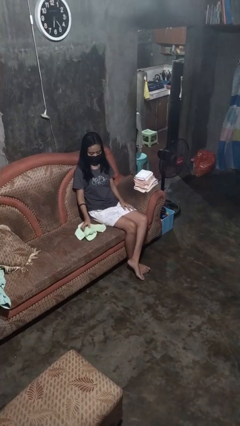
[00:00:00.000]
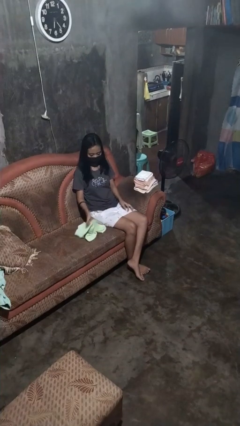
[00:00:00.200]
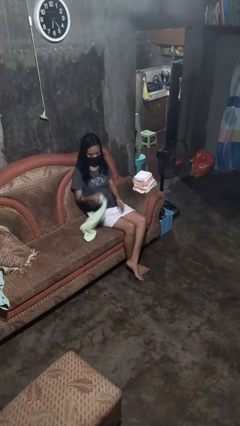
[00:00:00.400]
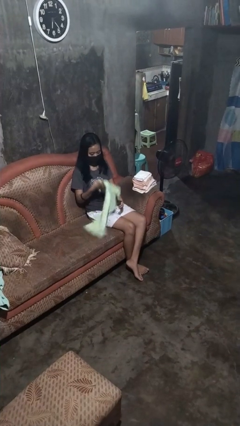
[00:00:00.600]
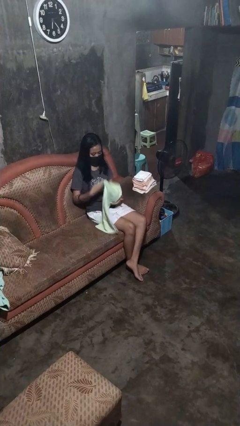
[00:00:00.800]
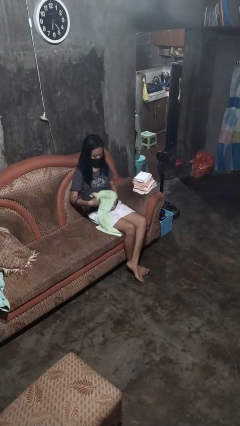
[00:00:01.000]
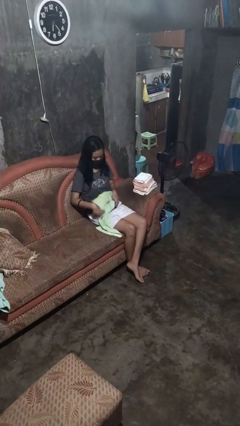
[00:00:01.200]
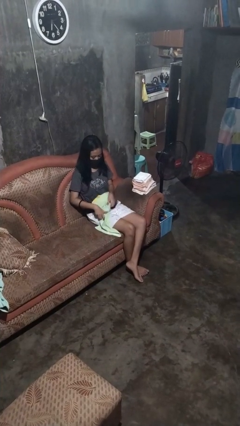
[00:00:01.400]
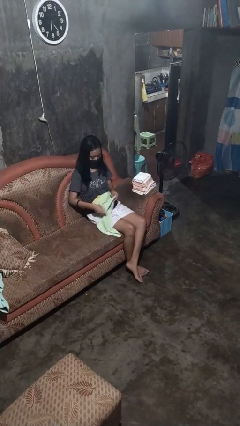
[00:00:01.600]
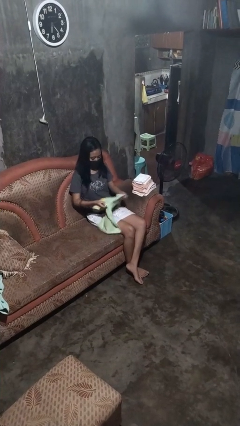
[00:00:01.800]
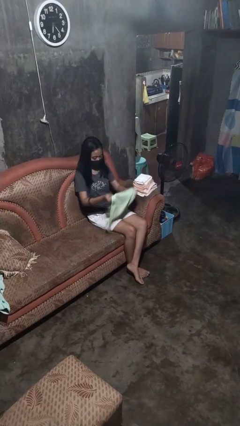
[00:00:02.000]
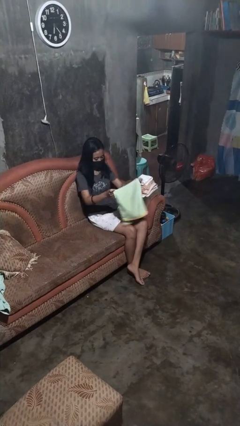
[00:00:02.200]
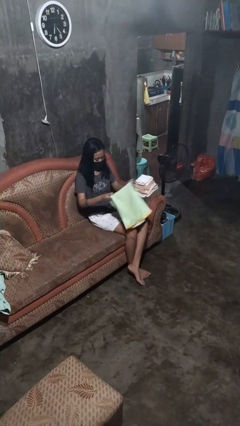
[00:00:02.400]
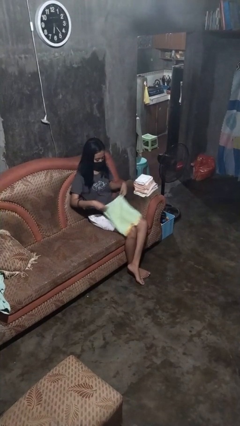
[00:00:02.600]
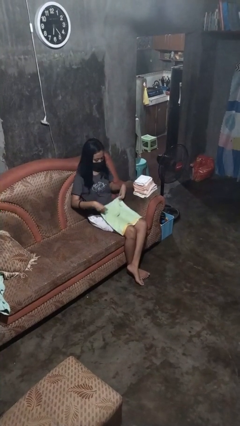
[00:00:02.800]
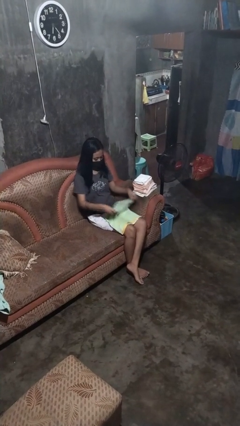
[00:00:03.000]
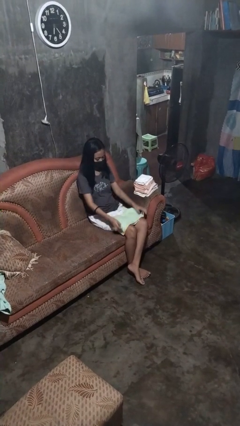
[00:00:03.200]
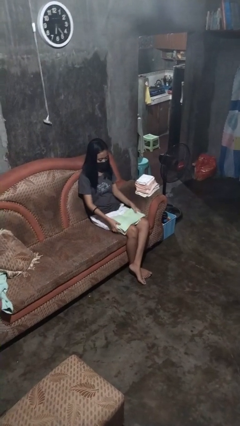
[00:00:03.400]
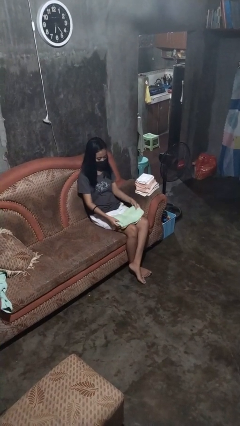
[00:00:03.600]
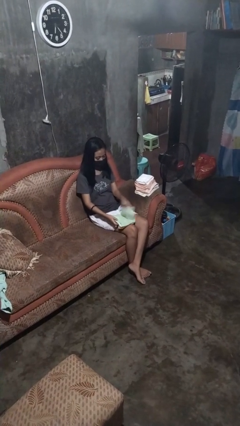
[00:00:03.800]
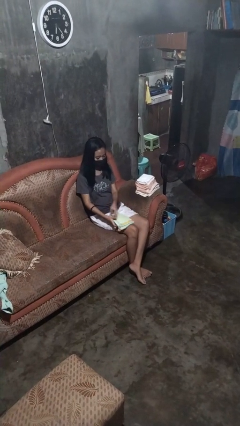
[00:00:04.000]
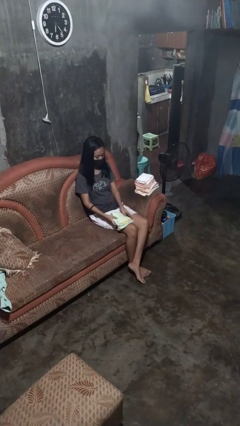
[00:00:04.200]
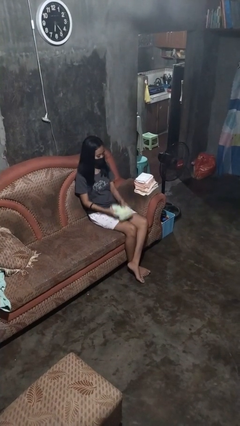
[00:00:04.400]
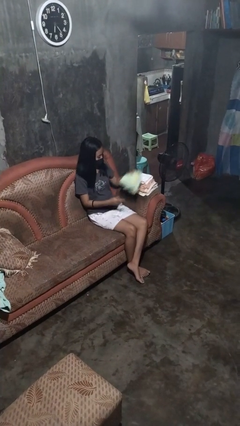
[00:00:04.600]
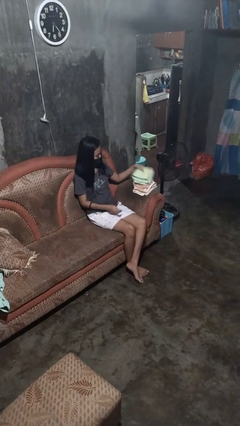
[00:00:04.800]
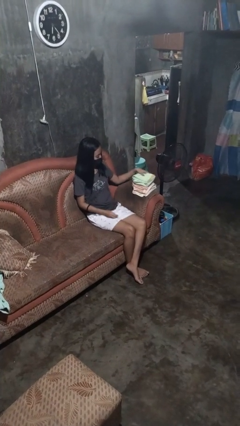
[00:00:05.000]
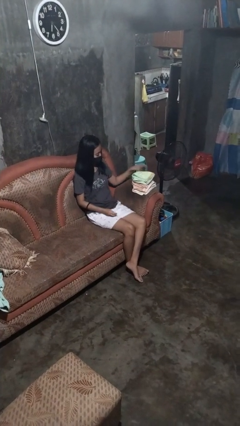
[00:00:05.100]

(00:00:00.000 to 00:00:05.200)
person folds towel

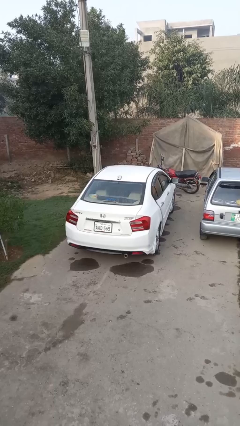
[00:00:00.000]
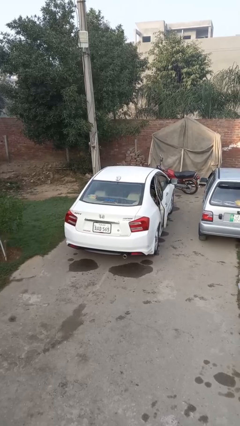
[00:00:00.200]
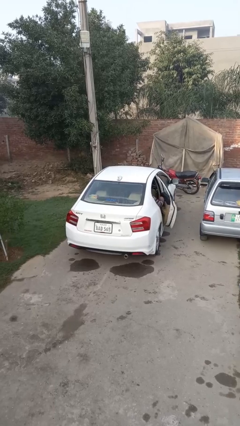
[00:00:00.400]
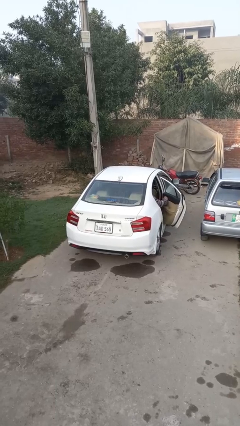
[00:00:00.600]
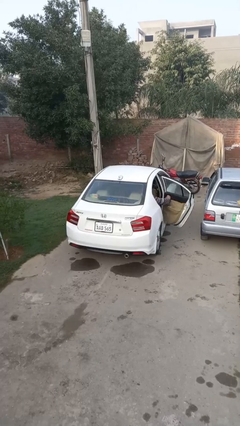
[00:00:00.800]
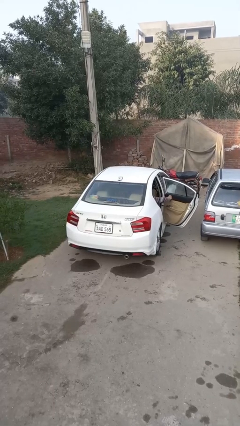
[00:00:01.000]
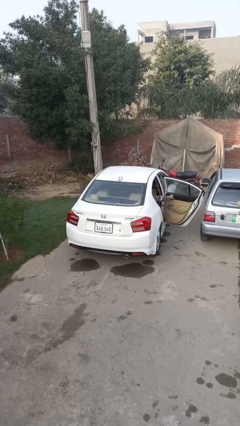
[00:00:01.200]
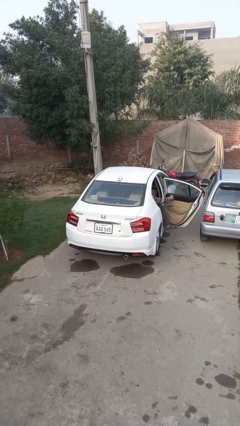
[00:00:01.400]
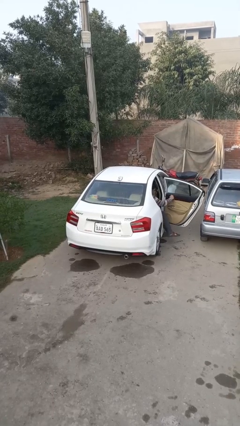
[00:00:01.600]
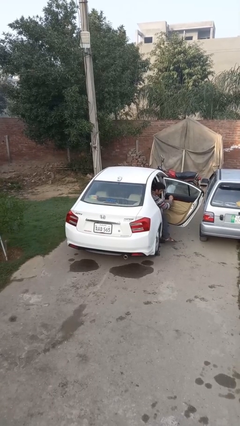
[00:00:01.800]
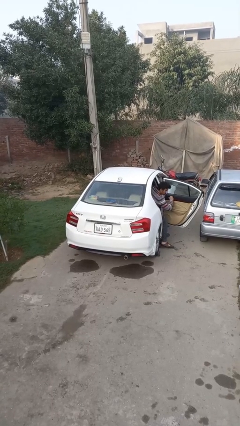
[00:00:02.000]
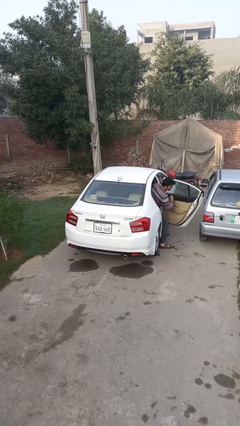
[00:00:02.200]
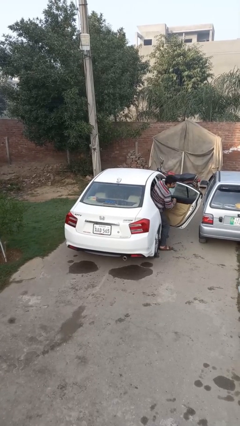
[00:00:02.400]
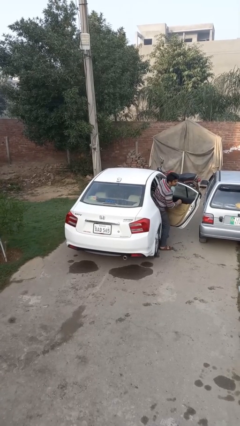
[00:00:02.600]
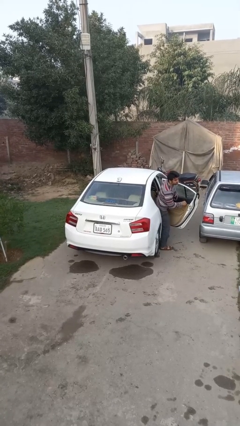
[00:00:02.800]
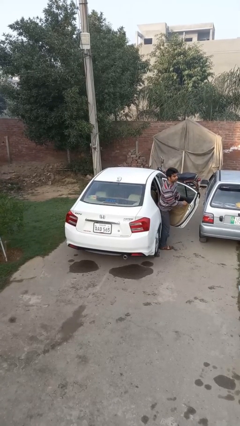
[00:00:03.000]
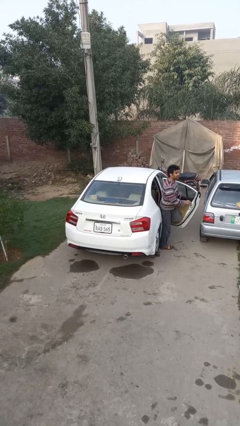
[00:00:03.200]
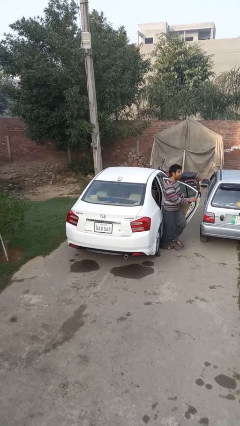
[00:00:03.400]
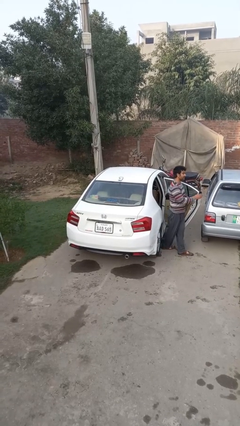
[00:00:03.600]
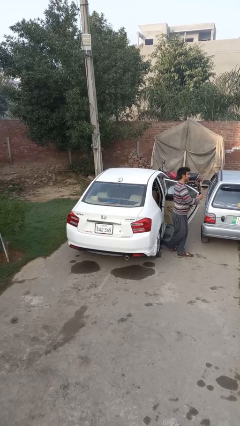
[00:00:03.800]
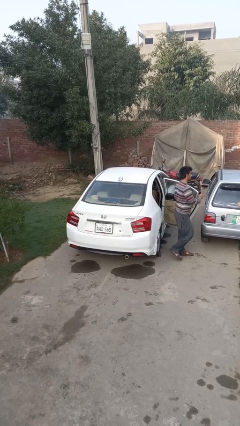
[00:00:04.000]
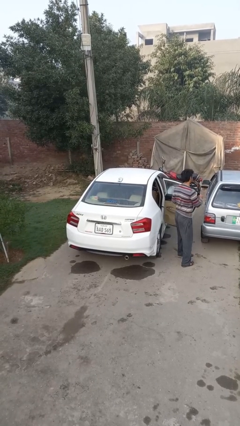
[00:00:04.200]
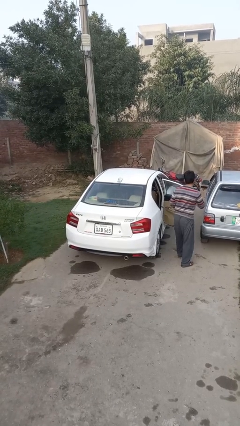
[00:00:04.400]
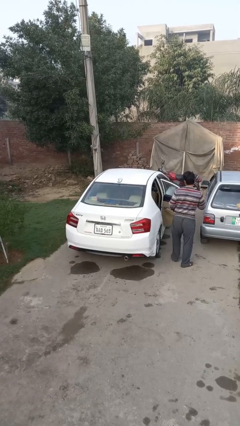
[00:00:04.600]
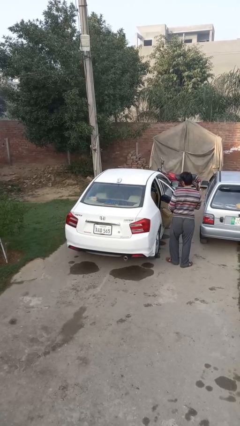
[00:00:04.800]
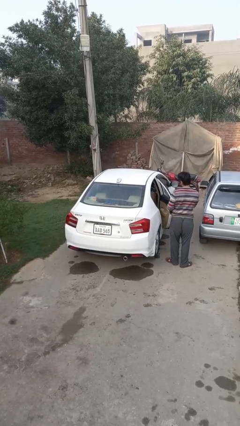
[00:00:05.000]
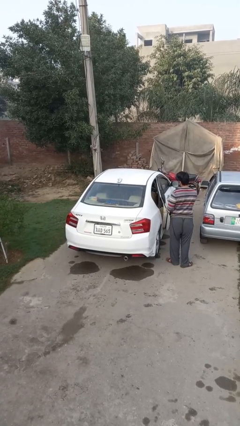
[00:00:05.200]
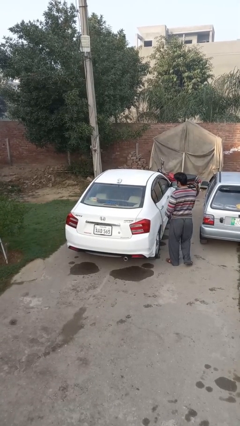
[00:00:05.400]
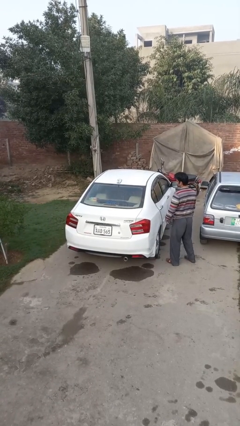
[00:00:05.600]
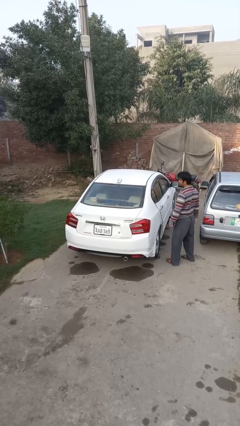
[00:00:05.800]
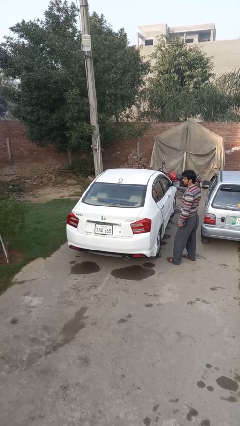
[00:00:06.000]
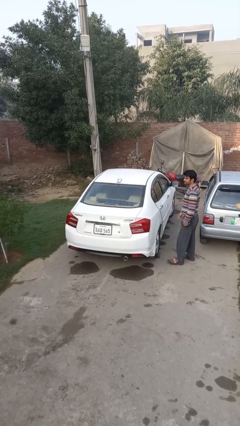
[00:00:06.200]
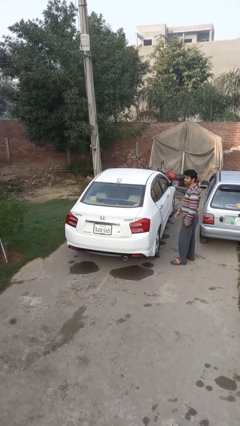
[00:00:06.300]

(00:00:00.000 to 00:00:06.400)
car drops off person

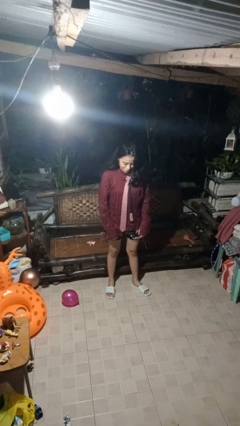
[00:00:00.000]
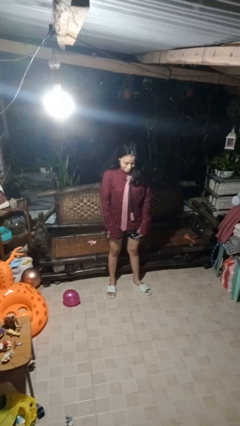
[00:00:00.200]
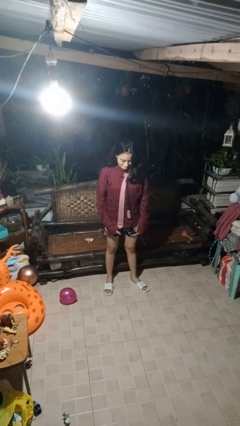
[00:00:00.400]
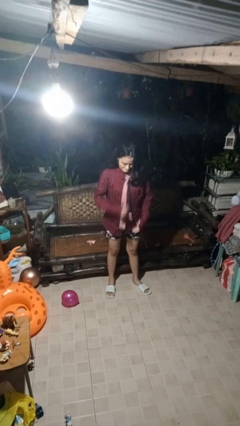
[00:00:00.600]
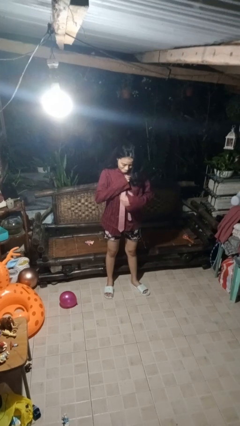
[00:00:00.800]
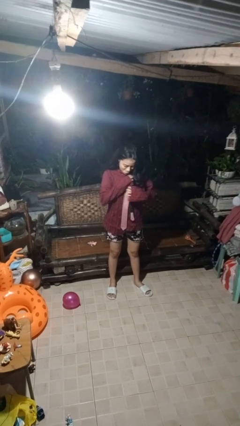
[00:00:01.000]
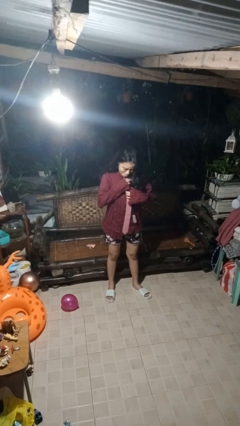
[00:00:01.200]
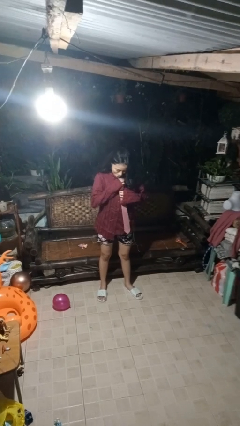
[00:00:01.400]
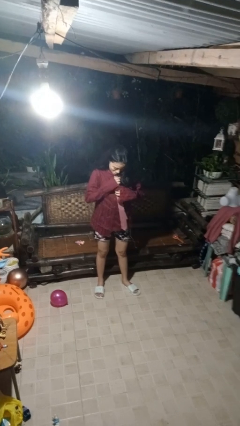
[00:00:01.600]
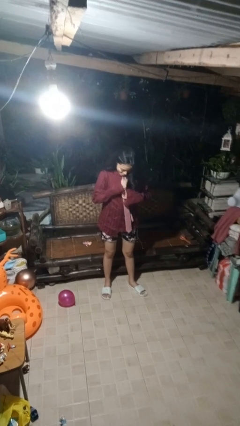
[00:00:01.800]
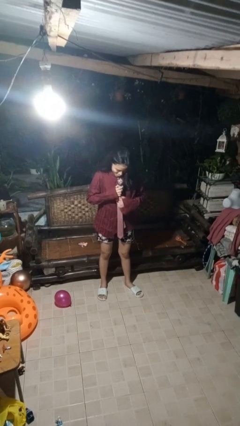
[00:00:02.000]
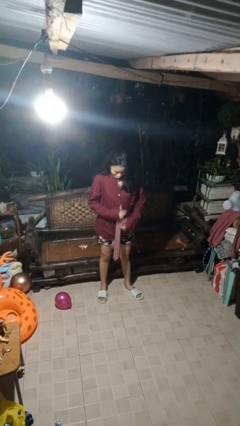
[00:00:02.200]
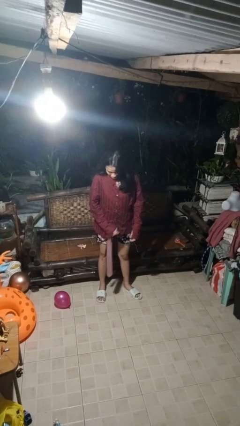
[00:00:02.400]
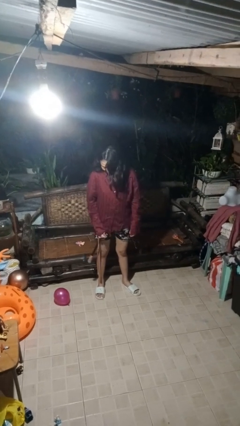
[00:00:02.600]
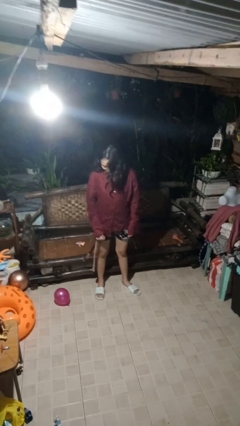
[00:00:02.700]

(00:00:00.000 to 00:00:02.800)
person takes off necktie

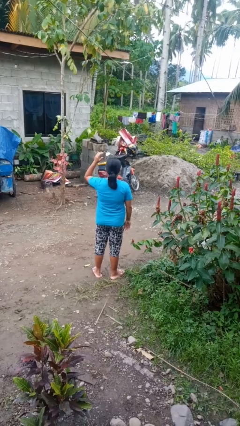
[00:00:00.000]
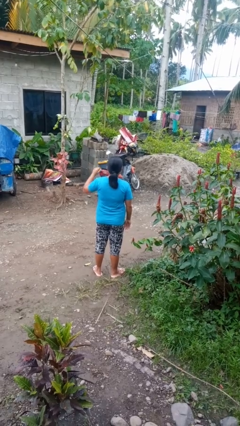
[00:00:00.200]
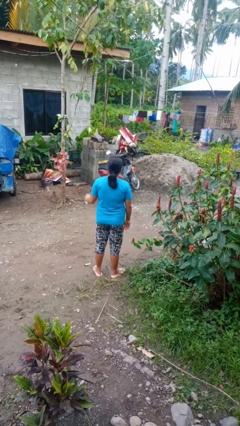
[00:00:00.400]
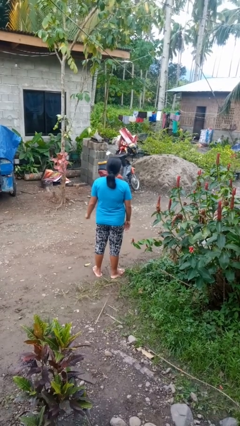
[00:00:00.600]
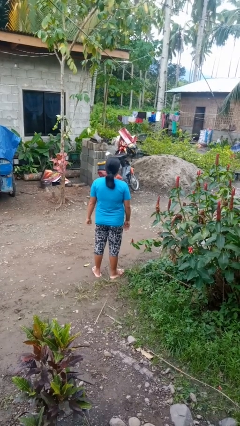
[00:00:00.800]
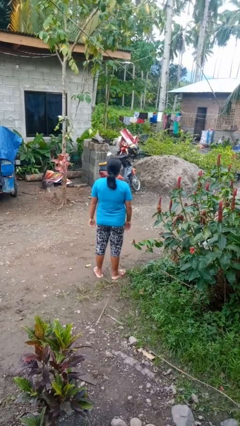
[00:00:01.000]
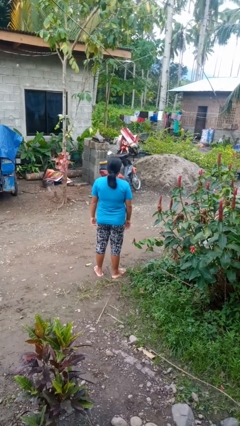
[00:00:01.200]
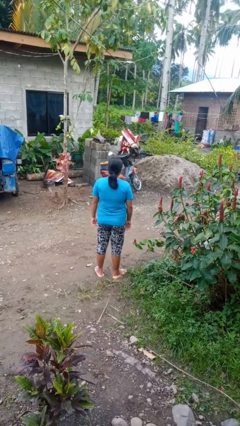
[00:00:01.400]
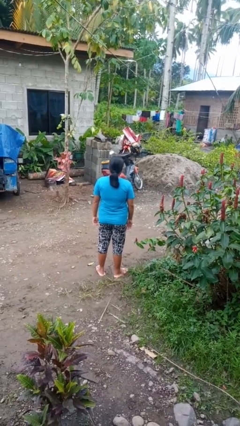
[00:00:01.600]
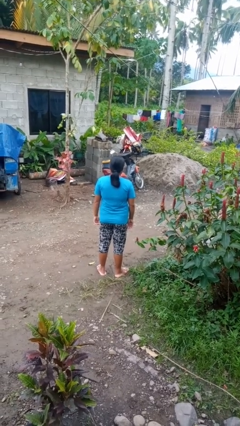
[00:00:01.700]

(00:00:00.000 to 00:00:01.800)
person gestures lower hand

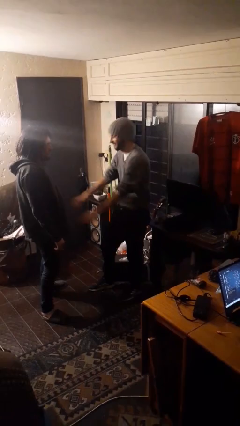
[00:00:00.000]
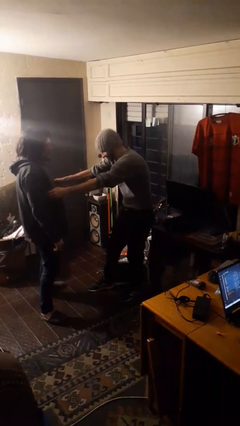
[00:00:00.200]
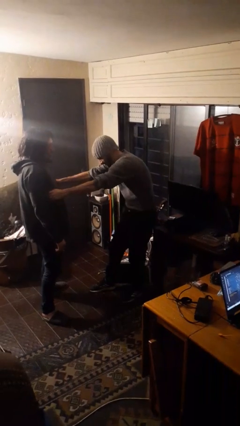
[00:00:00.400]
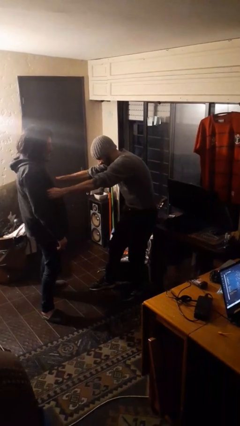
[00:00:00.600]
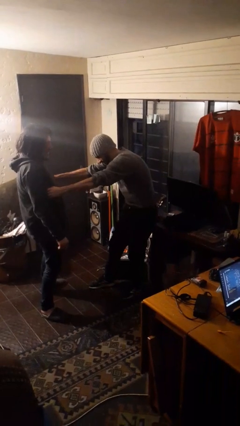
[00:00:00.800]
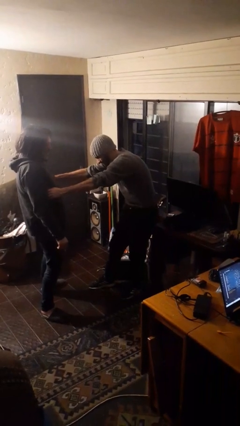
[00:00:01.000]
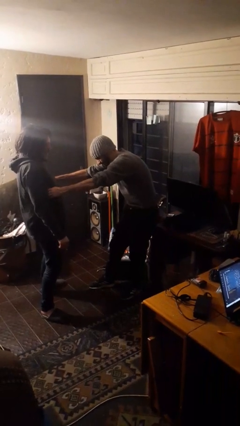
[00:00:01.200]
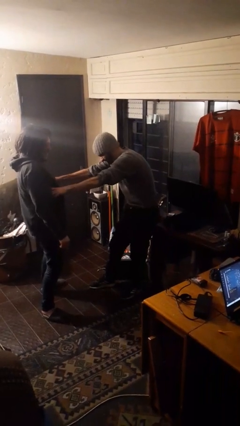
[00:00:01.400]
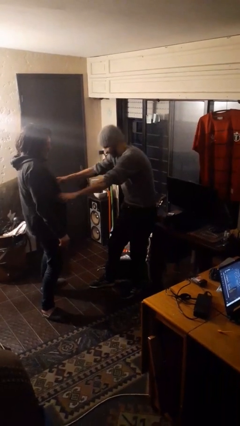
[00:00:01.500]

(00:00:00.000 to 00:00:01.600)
person tickles person

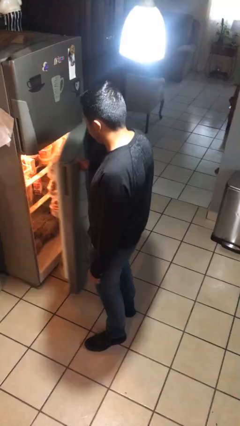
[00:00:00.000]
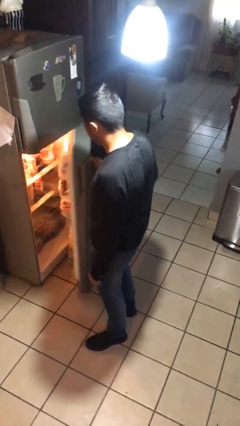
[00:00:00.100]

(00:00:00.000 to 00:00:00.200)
person puts object into refrigerator
